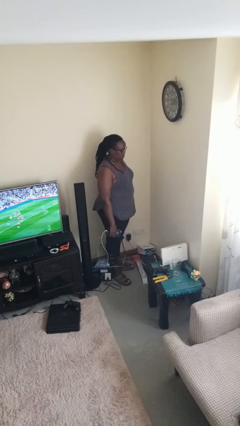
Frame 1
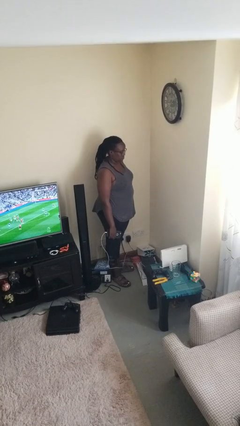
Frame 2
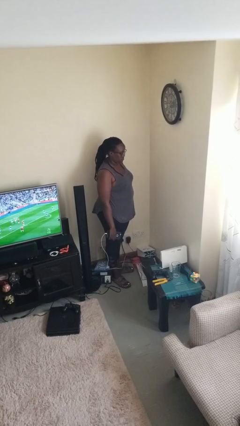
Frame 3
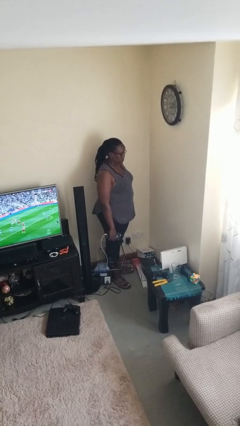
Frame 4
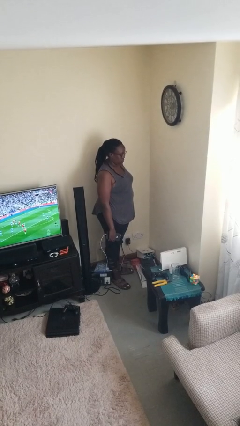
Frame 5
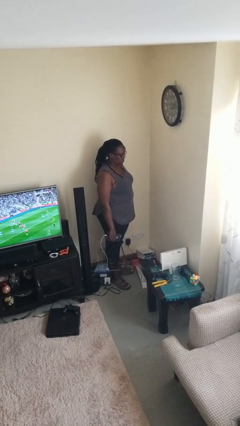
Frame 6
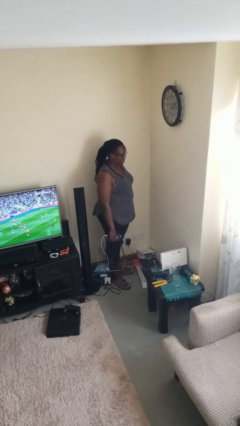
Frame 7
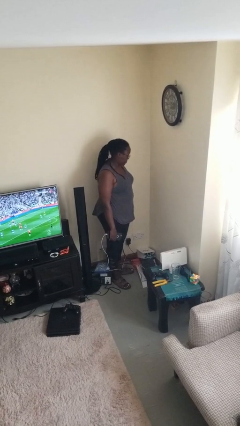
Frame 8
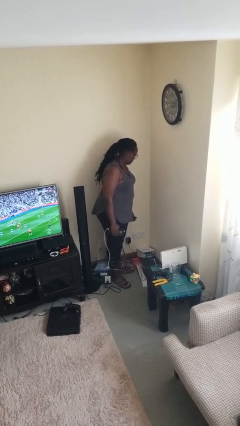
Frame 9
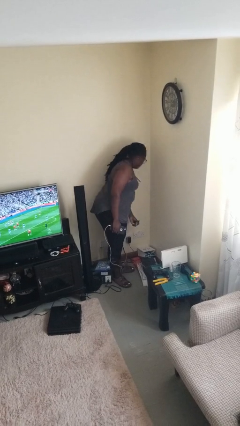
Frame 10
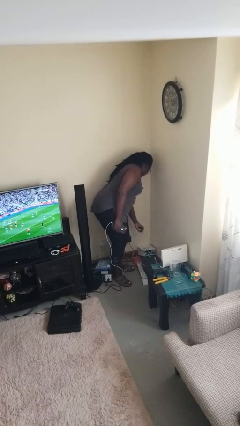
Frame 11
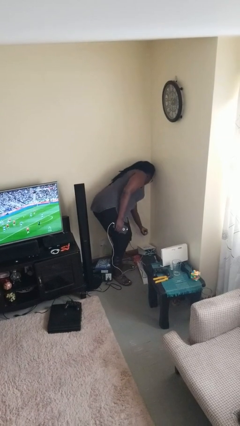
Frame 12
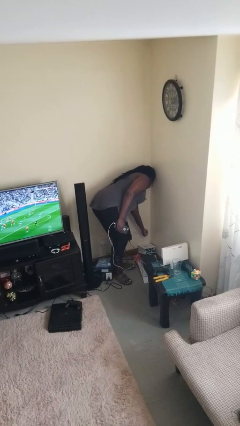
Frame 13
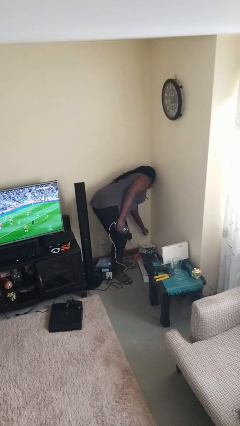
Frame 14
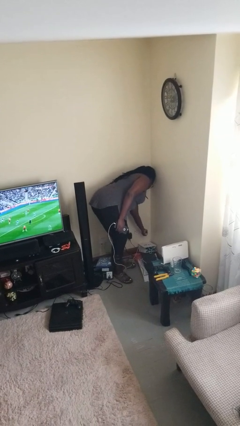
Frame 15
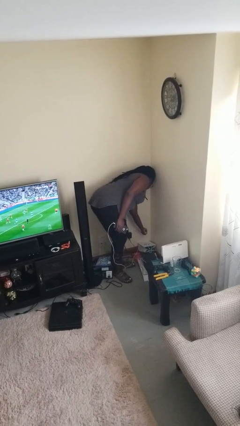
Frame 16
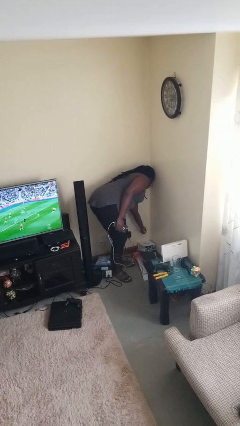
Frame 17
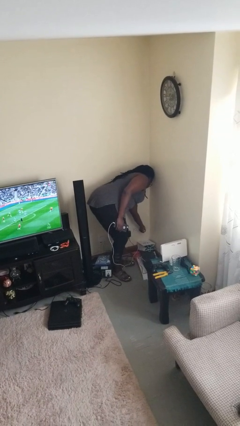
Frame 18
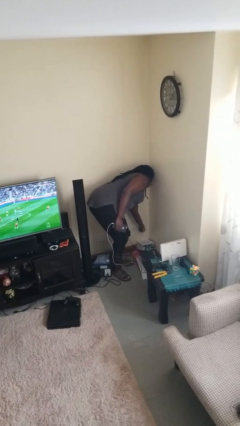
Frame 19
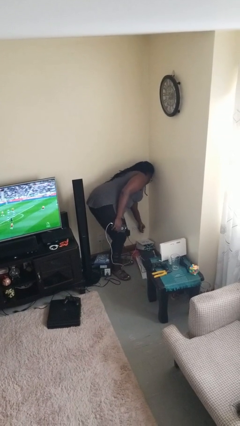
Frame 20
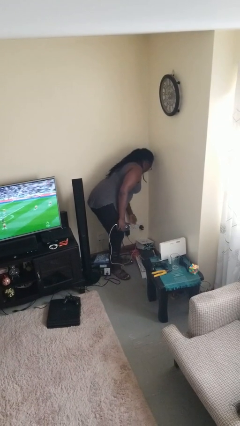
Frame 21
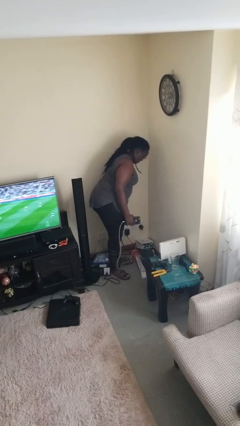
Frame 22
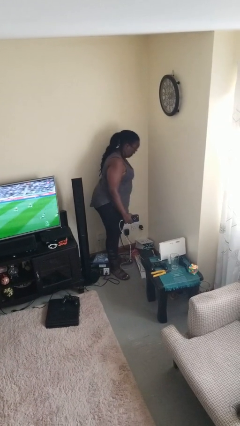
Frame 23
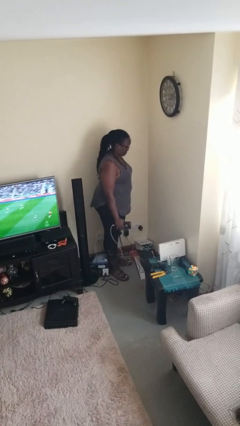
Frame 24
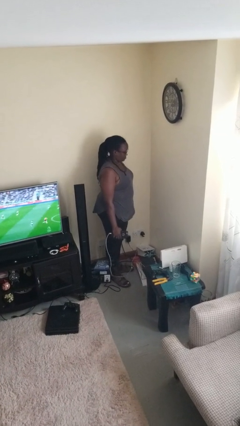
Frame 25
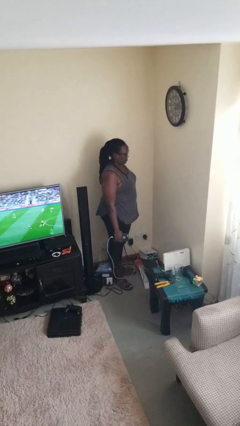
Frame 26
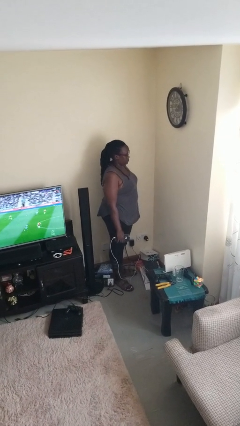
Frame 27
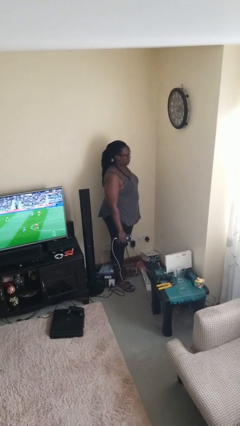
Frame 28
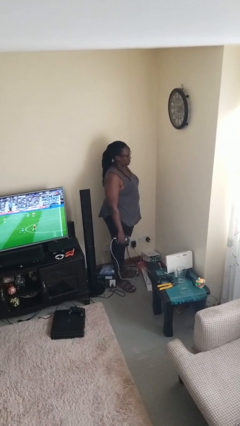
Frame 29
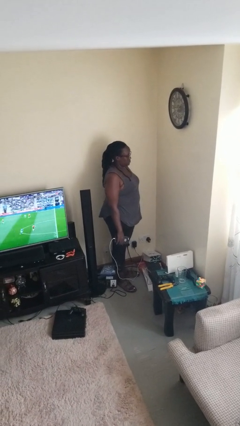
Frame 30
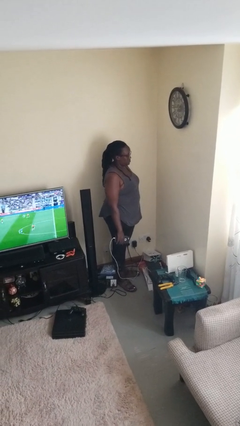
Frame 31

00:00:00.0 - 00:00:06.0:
person plugs into electrical socket

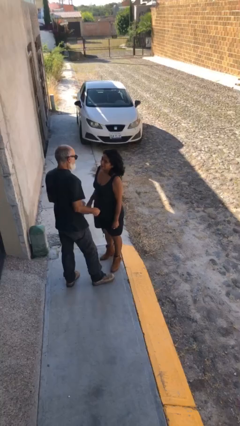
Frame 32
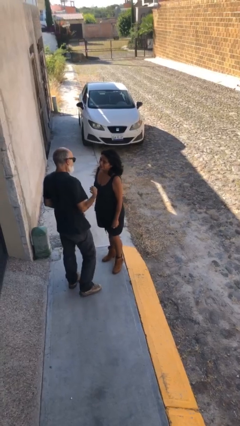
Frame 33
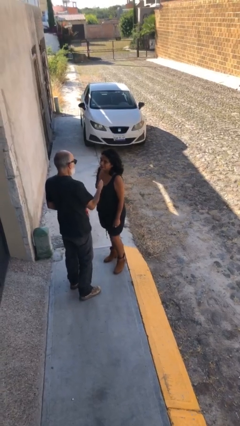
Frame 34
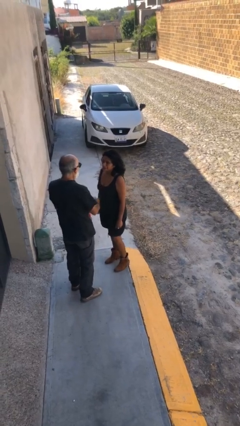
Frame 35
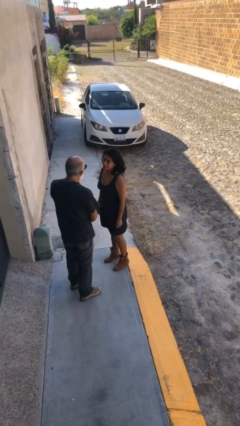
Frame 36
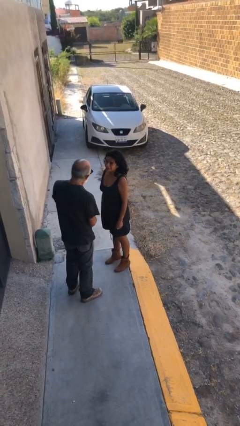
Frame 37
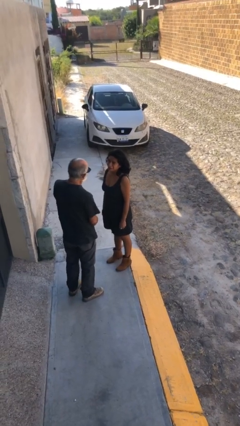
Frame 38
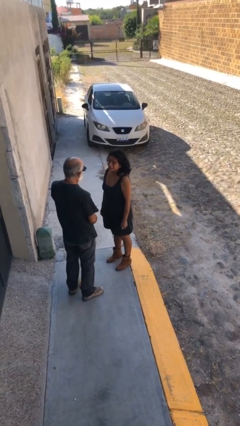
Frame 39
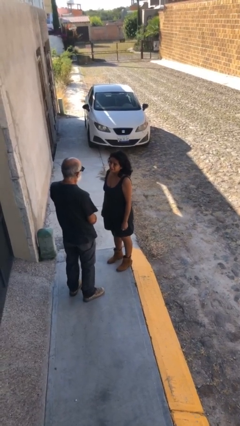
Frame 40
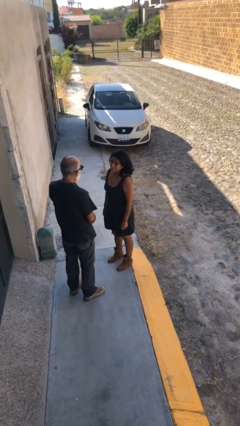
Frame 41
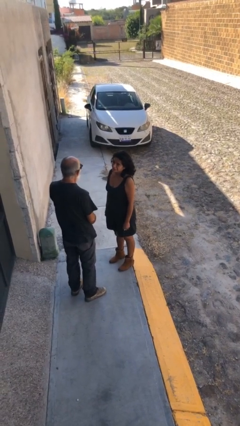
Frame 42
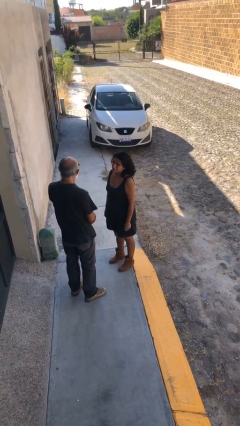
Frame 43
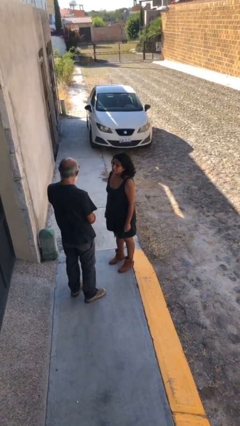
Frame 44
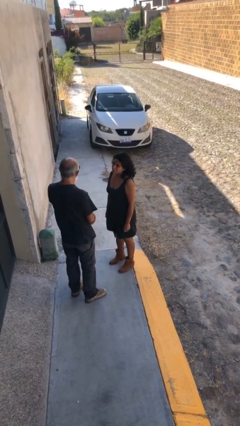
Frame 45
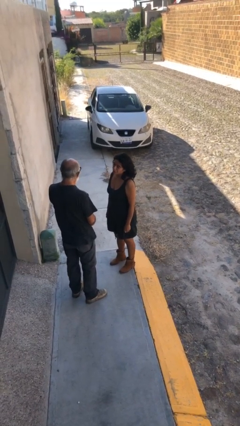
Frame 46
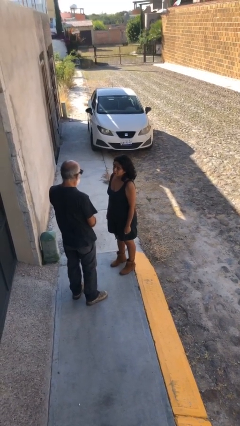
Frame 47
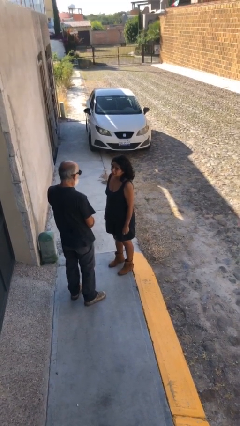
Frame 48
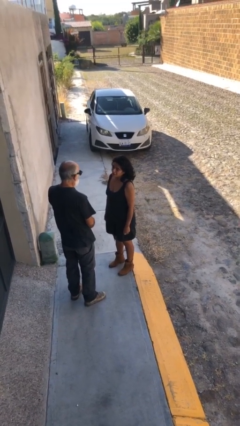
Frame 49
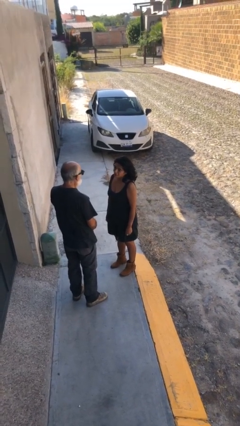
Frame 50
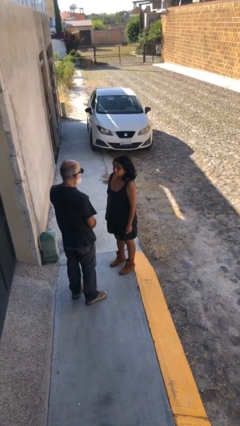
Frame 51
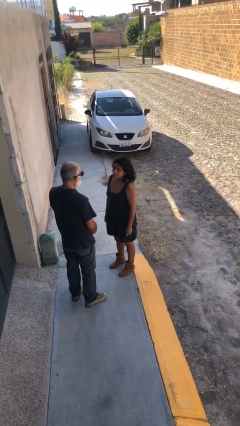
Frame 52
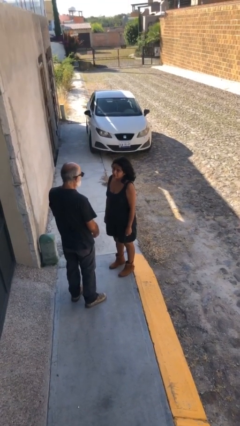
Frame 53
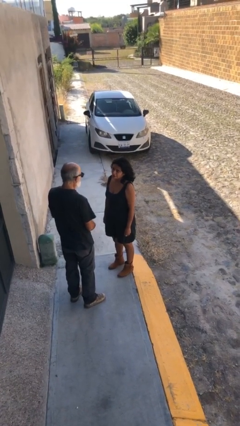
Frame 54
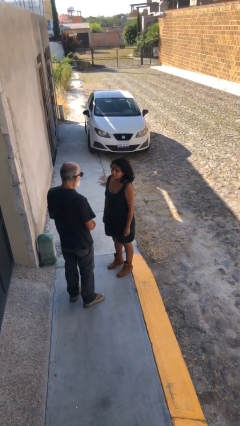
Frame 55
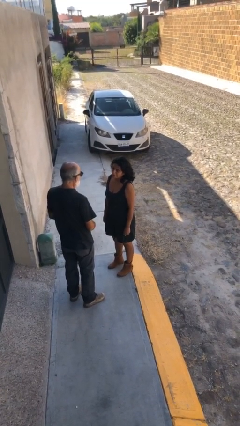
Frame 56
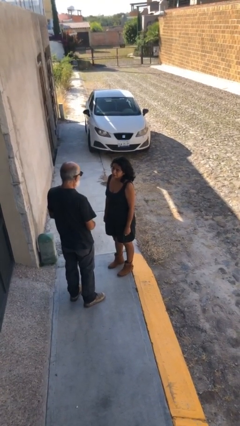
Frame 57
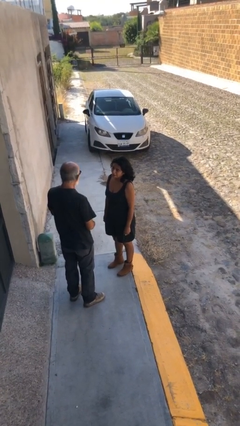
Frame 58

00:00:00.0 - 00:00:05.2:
person talks to person

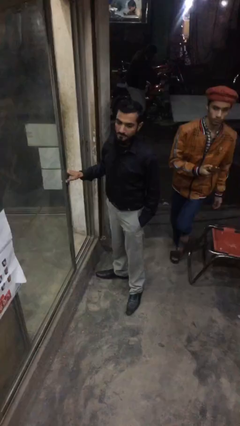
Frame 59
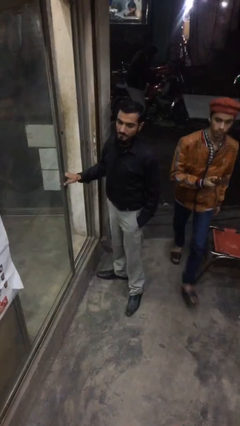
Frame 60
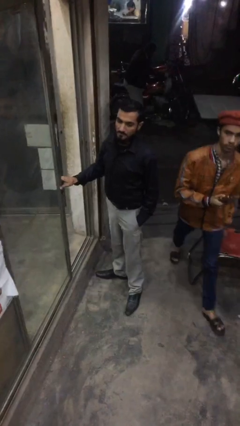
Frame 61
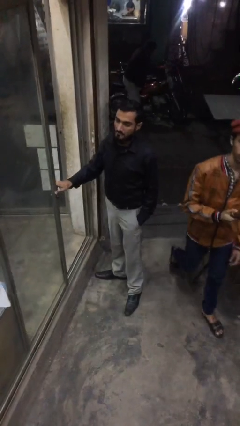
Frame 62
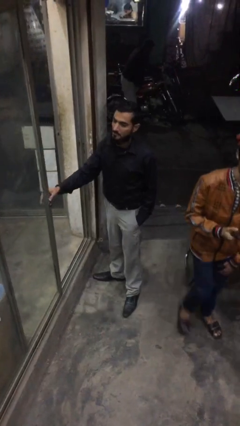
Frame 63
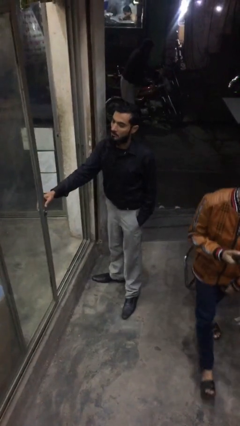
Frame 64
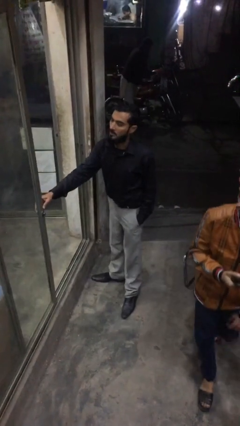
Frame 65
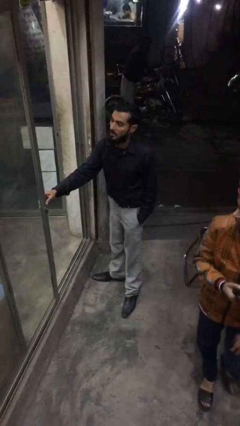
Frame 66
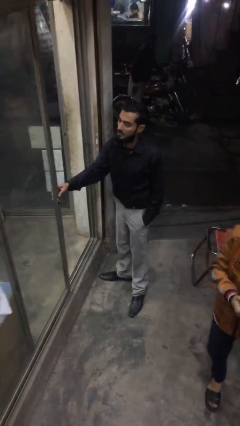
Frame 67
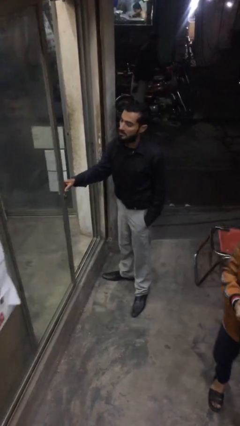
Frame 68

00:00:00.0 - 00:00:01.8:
person closes facility door

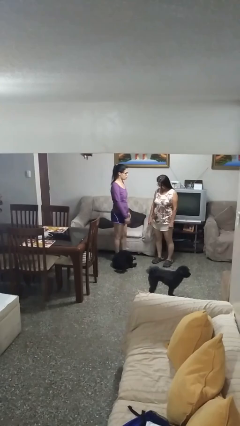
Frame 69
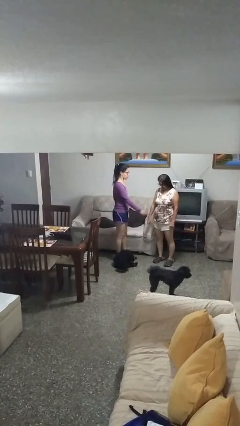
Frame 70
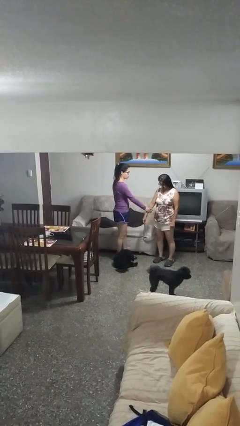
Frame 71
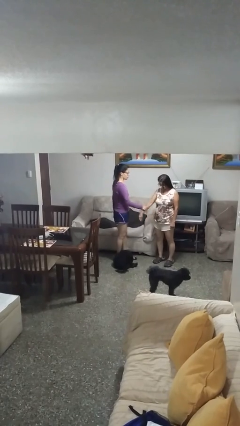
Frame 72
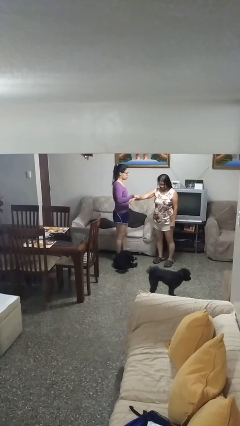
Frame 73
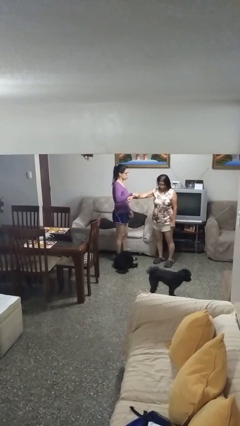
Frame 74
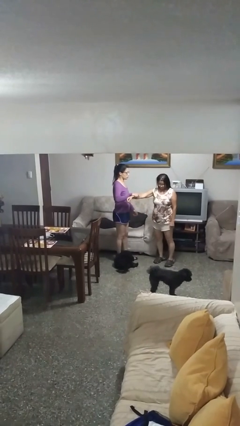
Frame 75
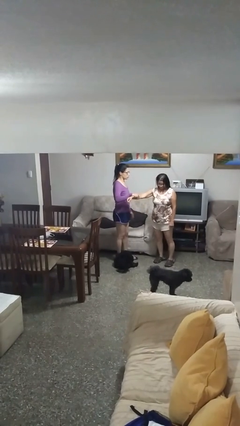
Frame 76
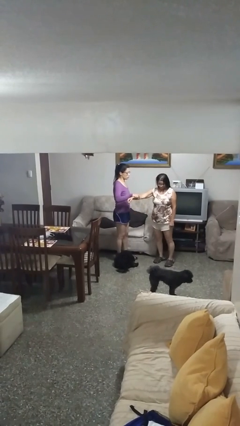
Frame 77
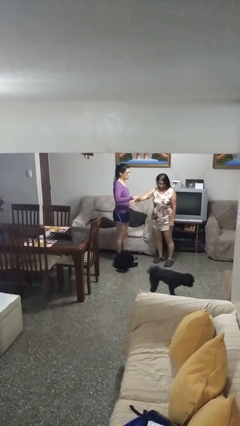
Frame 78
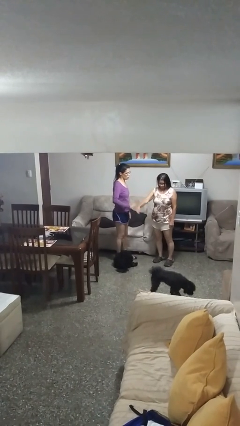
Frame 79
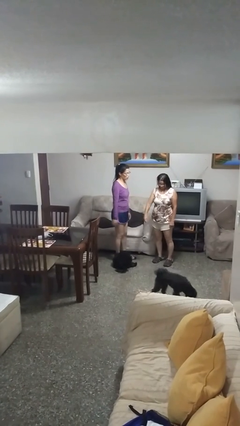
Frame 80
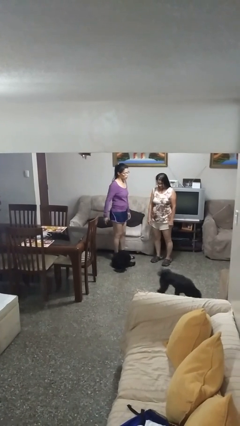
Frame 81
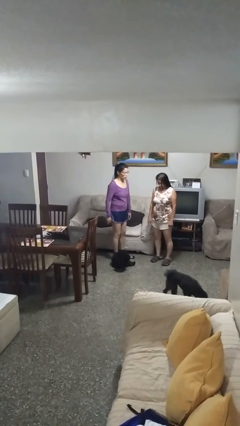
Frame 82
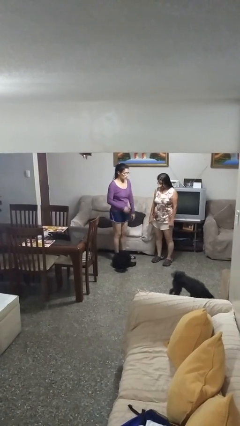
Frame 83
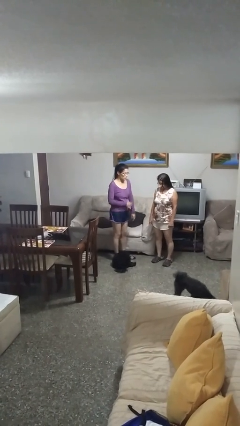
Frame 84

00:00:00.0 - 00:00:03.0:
person grabs person by forearm

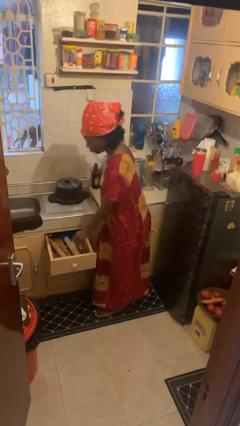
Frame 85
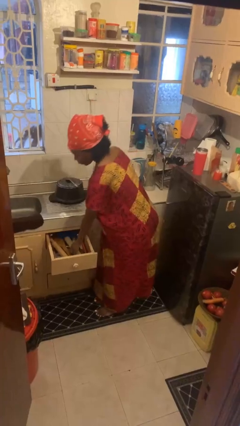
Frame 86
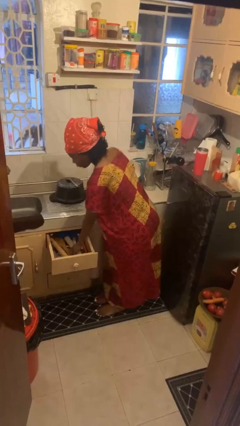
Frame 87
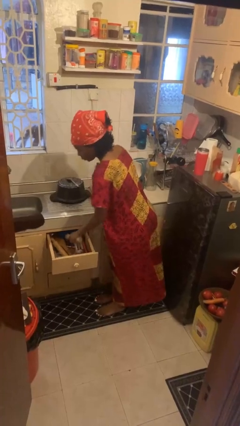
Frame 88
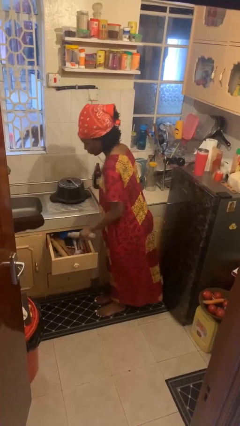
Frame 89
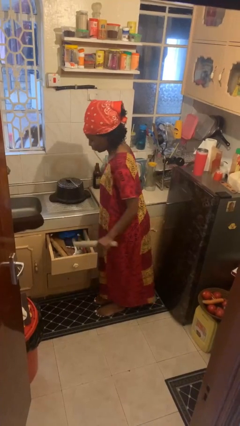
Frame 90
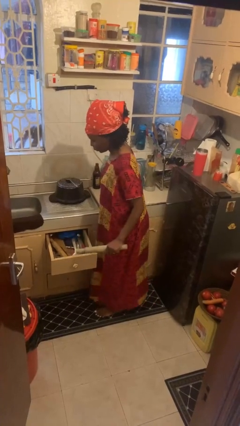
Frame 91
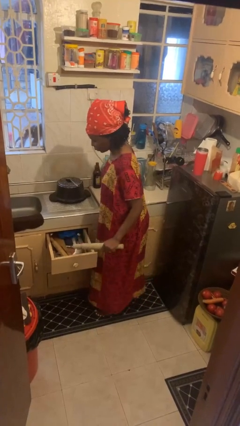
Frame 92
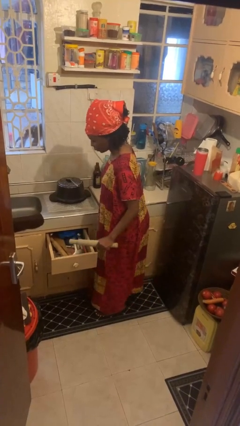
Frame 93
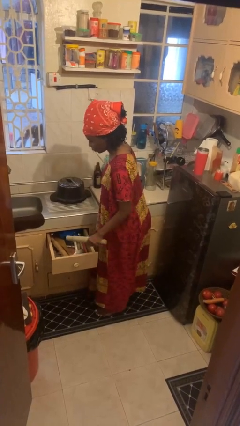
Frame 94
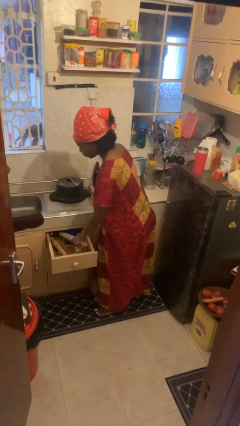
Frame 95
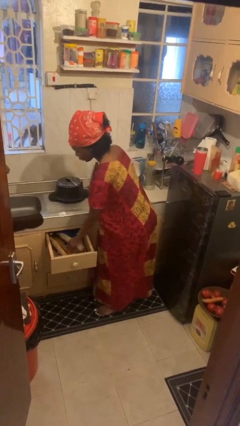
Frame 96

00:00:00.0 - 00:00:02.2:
person takes object from kitchen drawer
